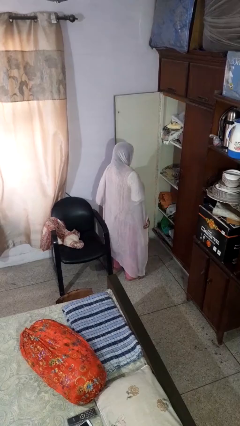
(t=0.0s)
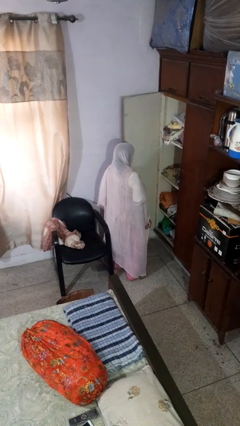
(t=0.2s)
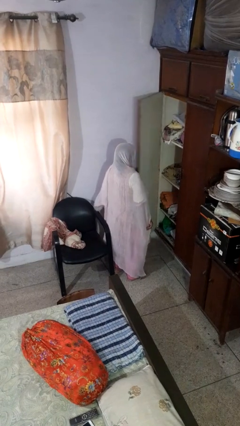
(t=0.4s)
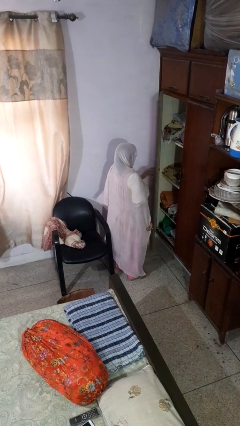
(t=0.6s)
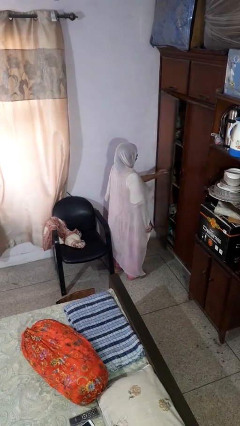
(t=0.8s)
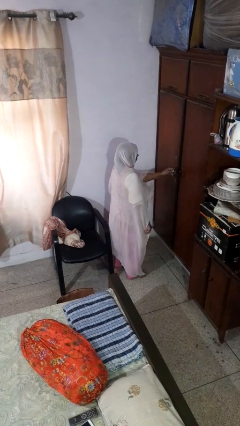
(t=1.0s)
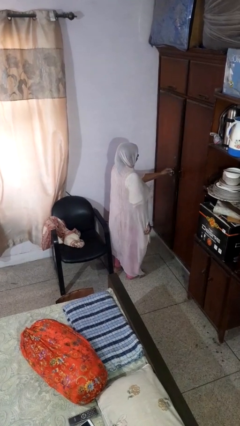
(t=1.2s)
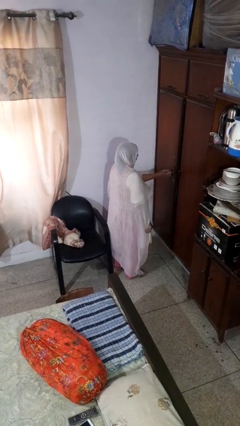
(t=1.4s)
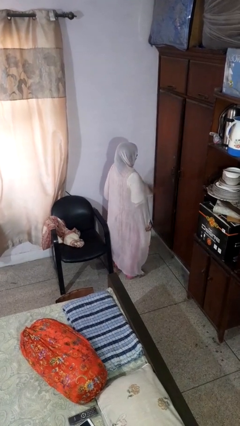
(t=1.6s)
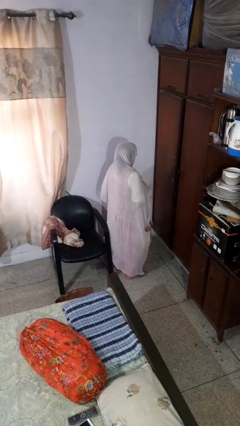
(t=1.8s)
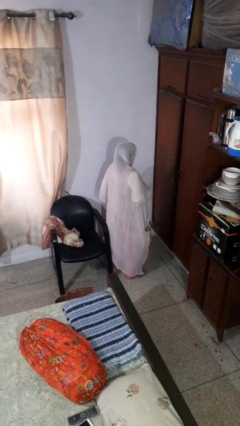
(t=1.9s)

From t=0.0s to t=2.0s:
person closes closet door

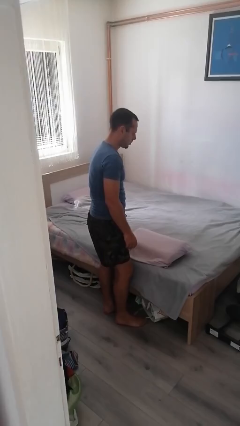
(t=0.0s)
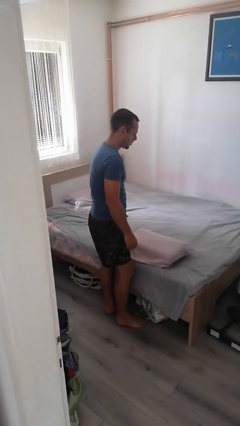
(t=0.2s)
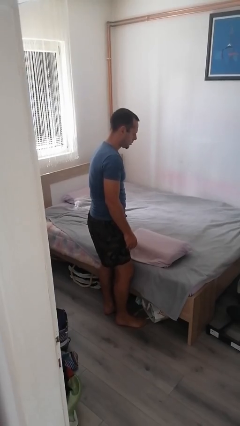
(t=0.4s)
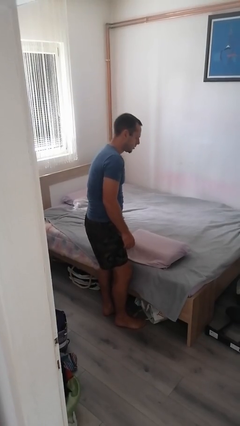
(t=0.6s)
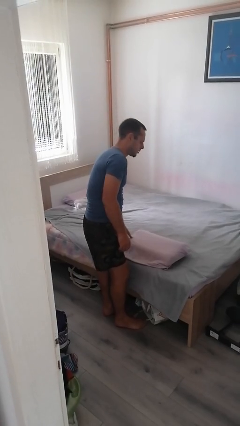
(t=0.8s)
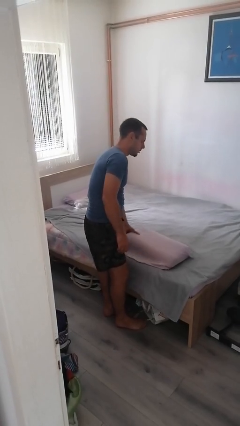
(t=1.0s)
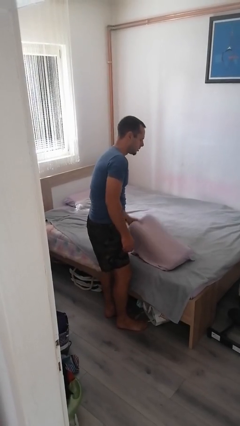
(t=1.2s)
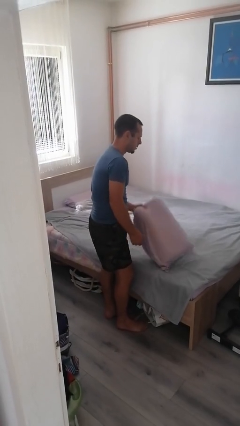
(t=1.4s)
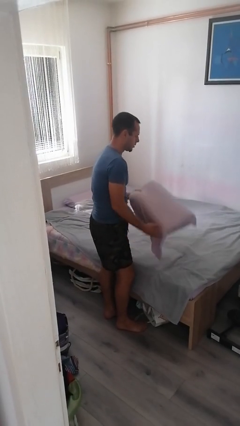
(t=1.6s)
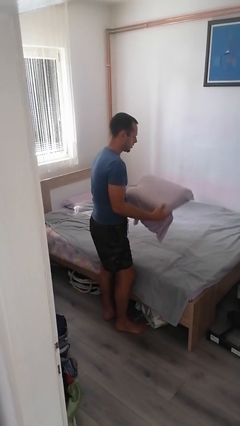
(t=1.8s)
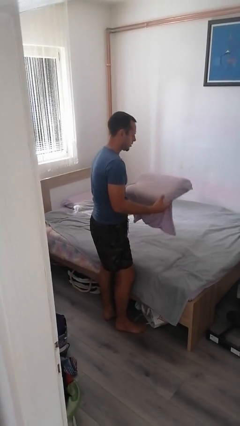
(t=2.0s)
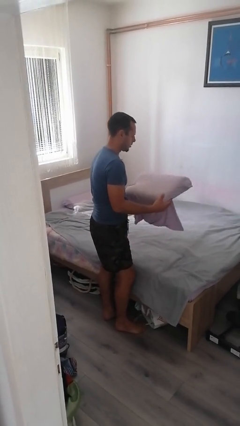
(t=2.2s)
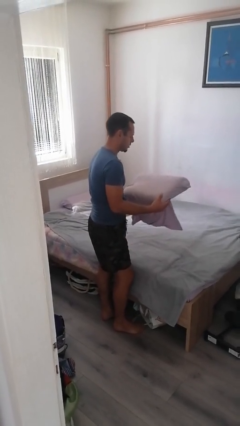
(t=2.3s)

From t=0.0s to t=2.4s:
person picks up object from bed

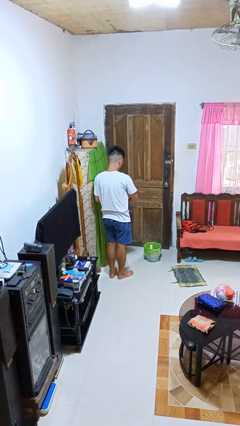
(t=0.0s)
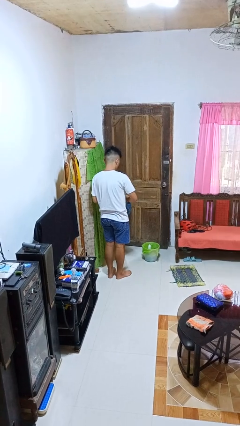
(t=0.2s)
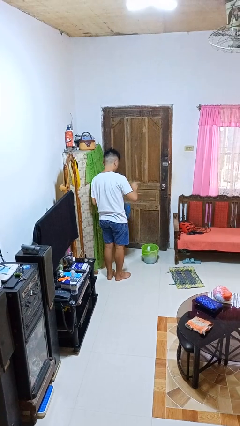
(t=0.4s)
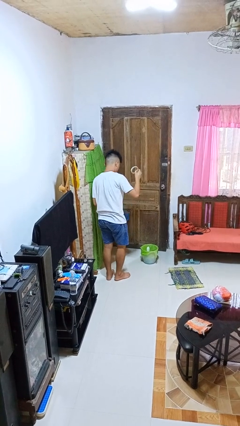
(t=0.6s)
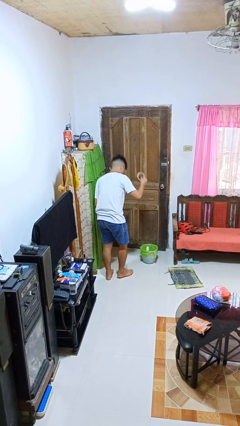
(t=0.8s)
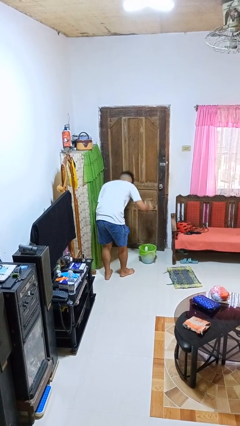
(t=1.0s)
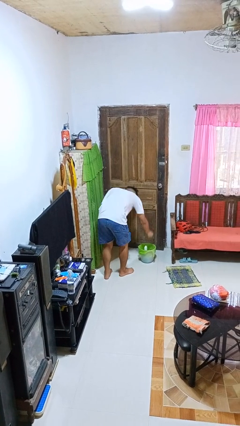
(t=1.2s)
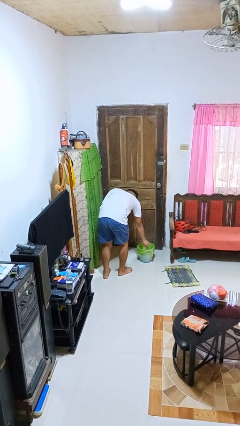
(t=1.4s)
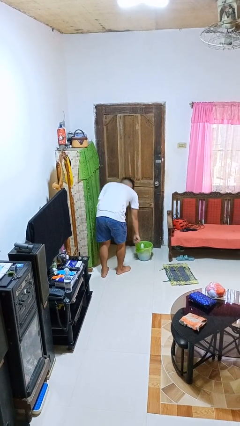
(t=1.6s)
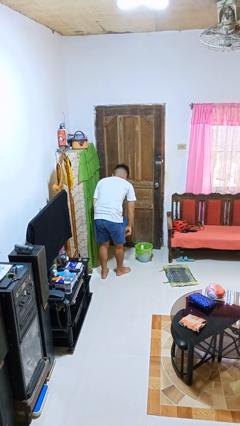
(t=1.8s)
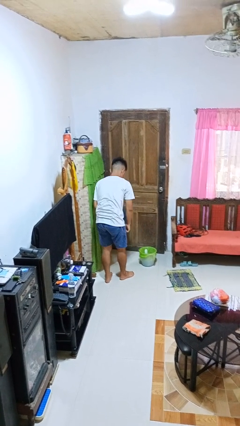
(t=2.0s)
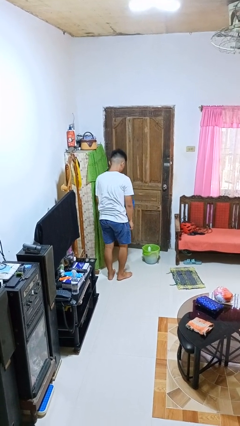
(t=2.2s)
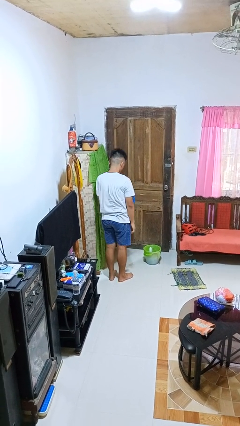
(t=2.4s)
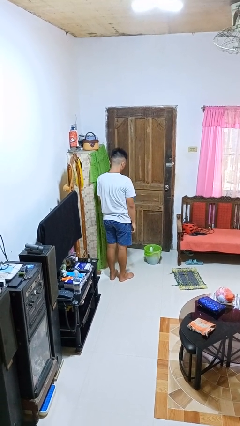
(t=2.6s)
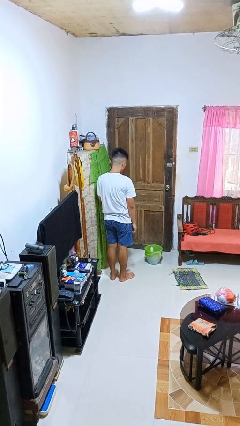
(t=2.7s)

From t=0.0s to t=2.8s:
person discards trash

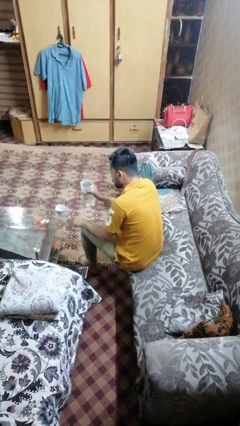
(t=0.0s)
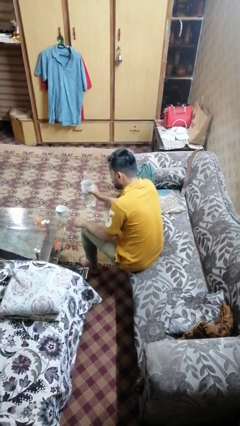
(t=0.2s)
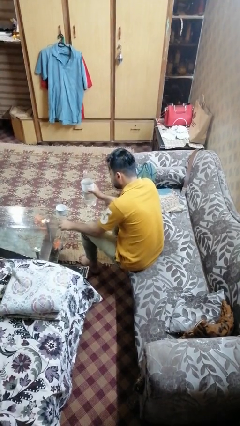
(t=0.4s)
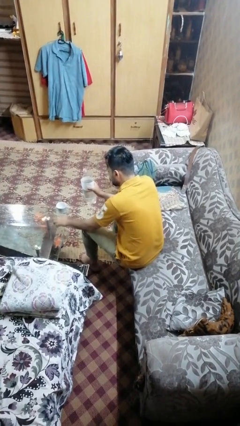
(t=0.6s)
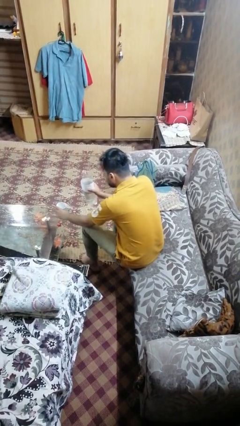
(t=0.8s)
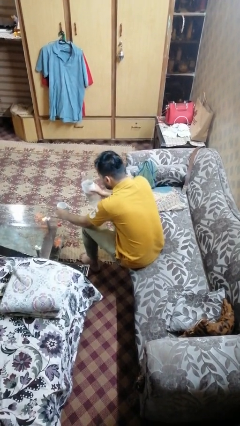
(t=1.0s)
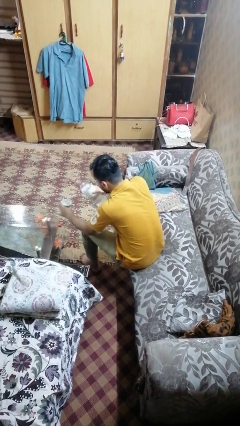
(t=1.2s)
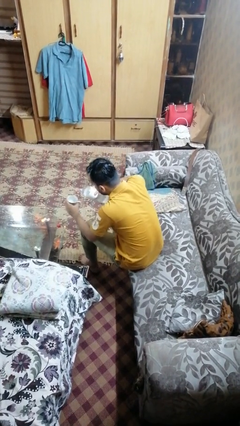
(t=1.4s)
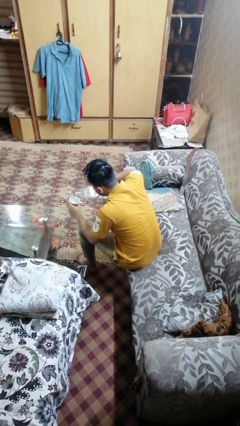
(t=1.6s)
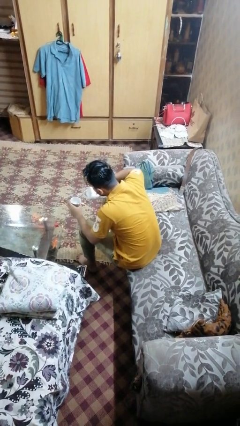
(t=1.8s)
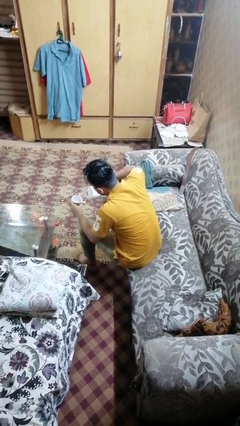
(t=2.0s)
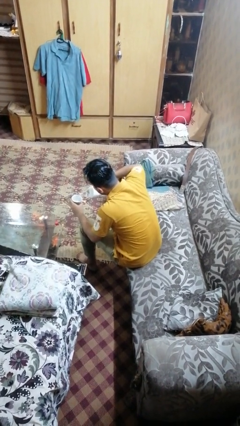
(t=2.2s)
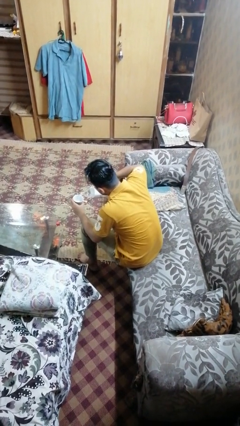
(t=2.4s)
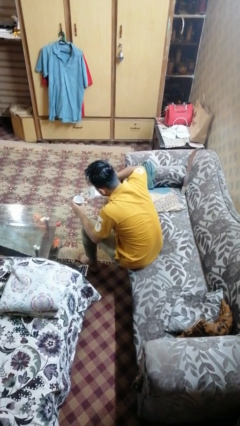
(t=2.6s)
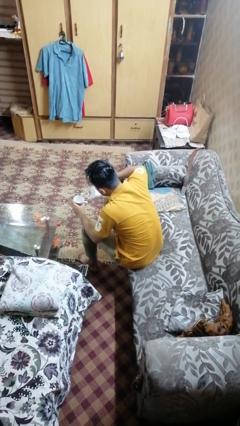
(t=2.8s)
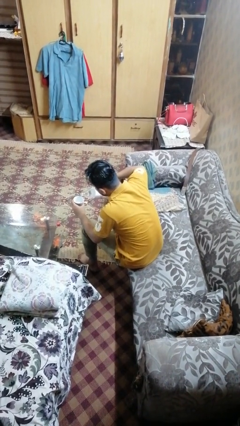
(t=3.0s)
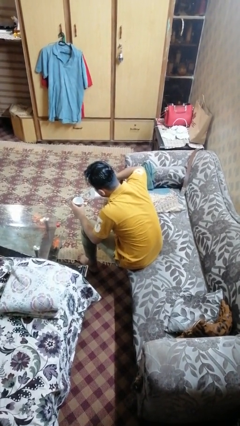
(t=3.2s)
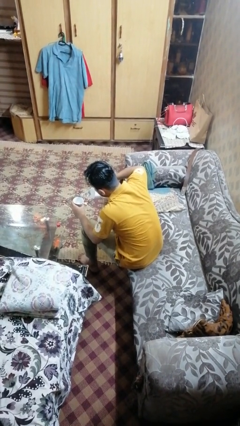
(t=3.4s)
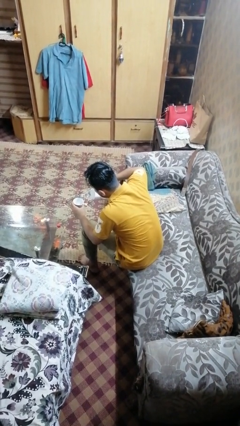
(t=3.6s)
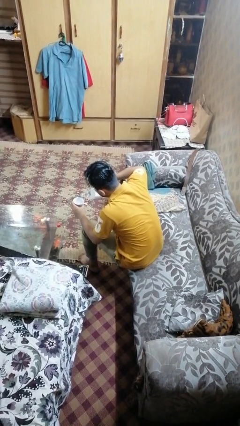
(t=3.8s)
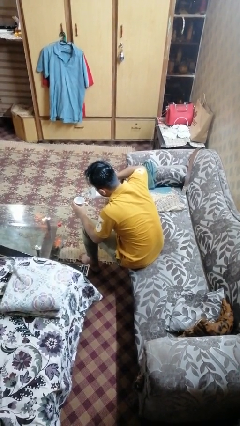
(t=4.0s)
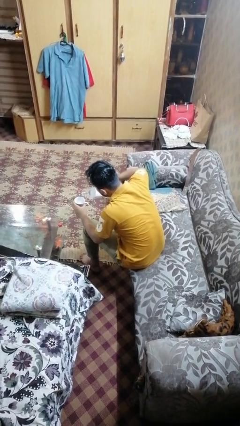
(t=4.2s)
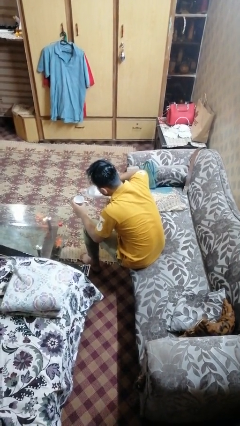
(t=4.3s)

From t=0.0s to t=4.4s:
person pours liquid into cup

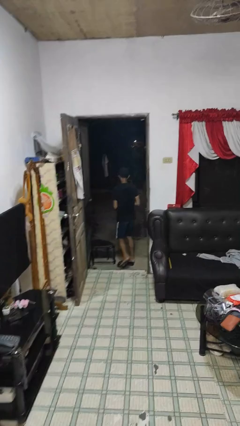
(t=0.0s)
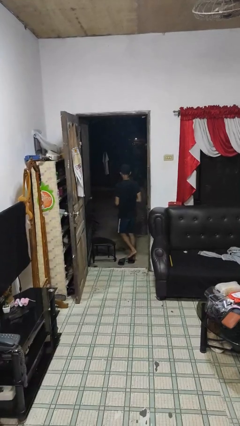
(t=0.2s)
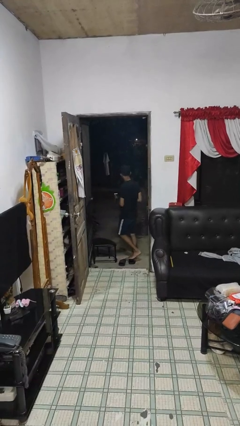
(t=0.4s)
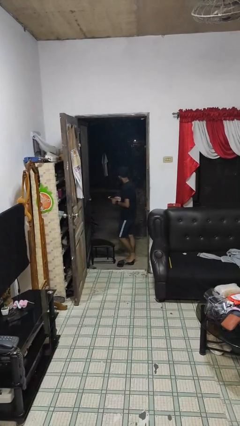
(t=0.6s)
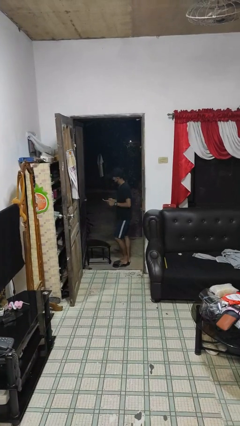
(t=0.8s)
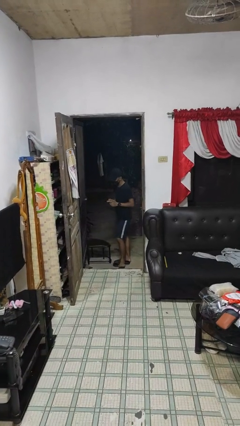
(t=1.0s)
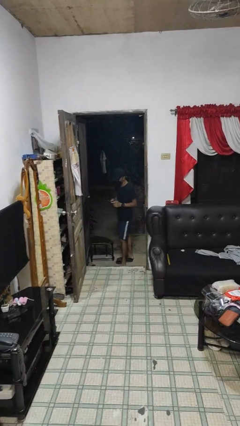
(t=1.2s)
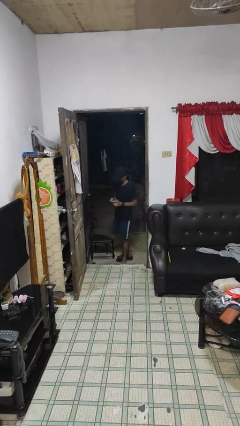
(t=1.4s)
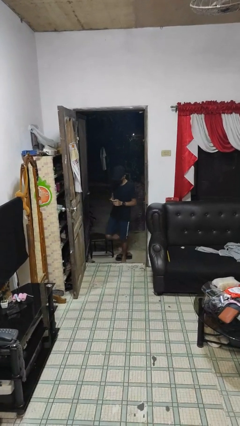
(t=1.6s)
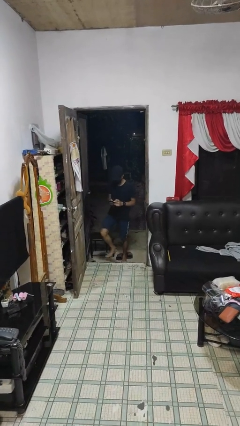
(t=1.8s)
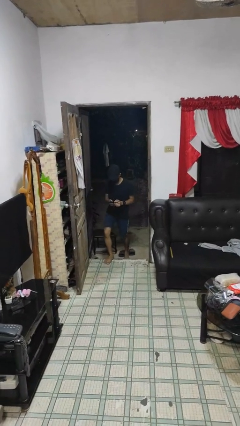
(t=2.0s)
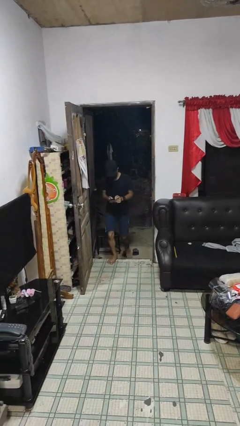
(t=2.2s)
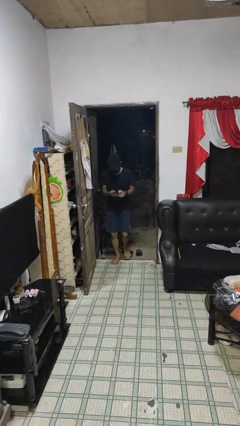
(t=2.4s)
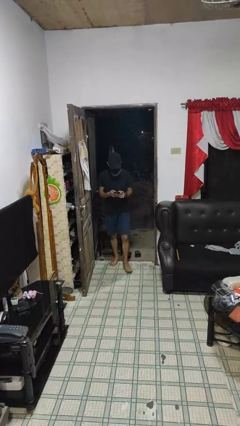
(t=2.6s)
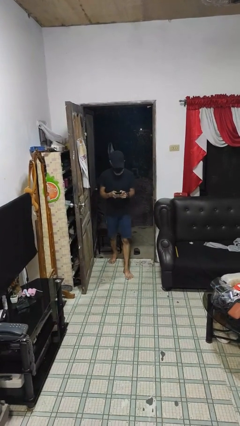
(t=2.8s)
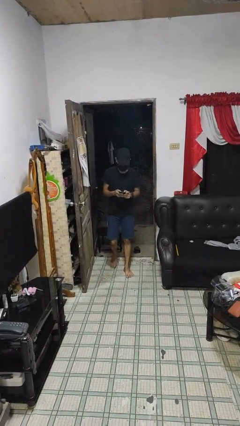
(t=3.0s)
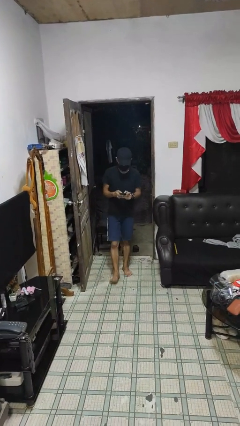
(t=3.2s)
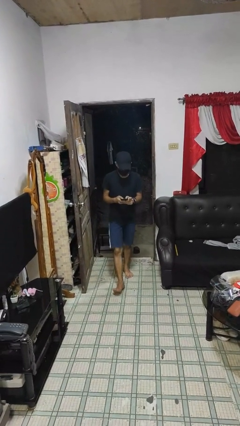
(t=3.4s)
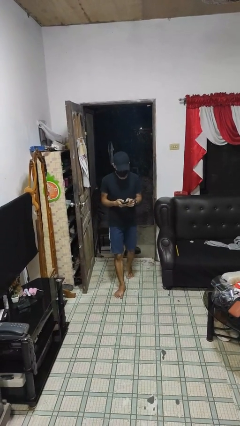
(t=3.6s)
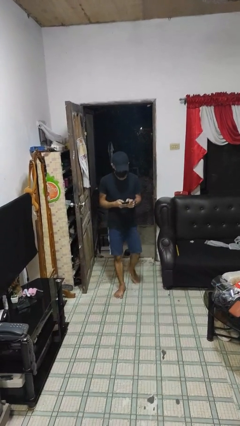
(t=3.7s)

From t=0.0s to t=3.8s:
person enters scene through structure

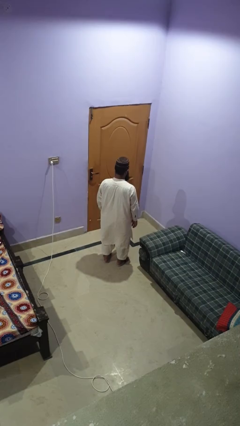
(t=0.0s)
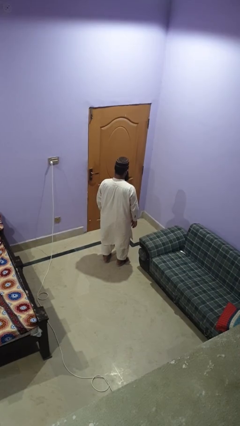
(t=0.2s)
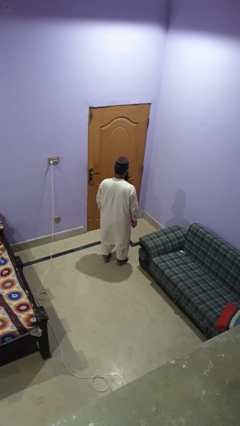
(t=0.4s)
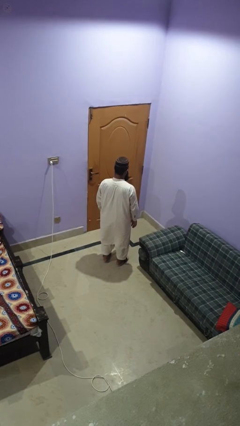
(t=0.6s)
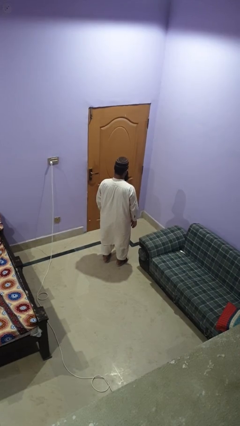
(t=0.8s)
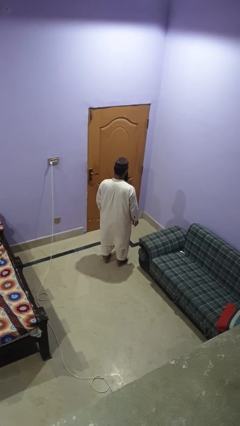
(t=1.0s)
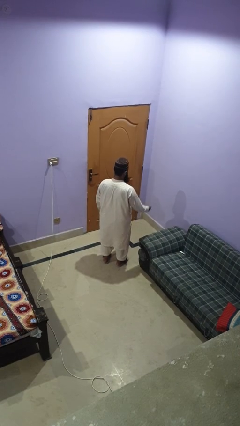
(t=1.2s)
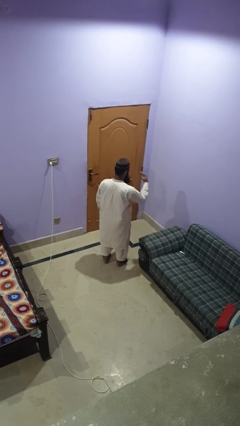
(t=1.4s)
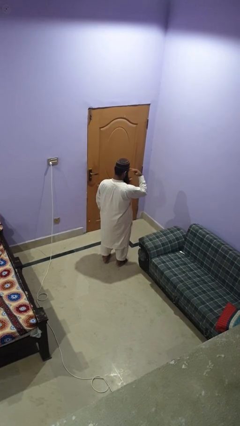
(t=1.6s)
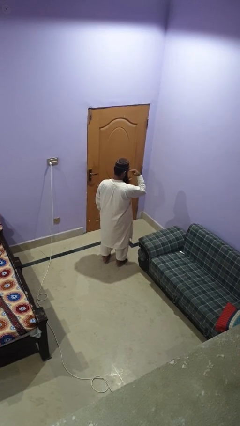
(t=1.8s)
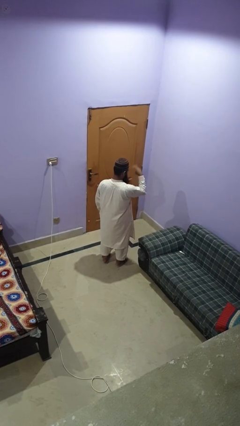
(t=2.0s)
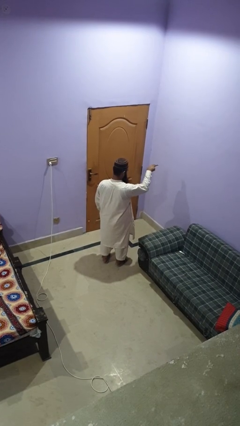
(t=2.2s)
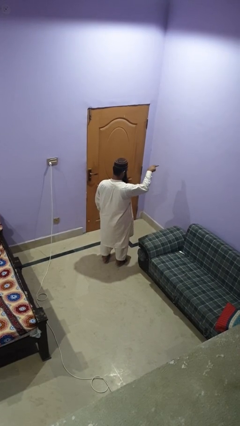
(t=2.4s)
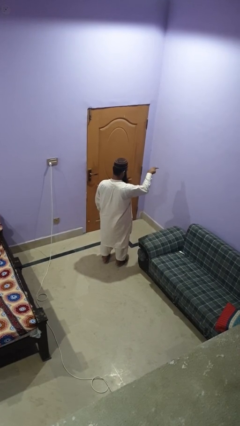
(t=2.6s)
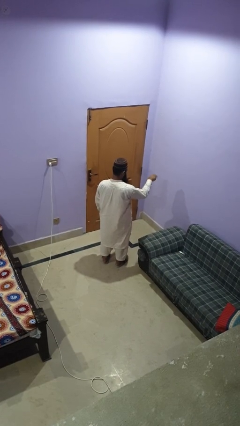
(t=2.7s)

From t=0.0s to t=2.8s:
person gestures watch closely
